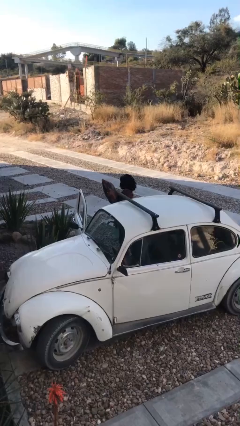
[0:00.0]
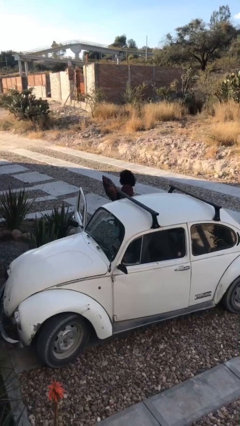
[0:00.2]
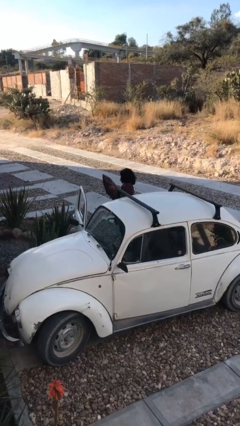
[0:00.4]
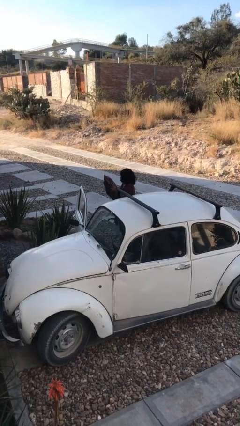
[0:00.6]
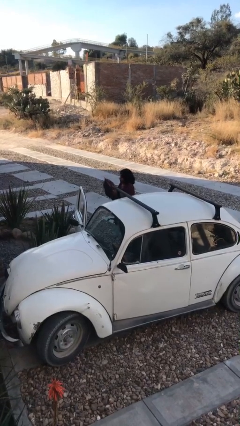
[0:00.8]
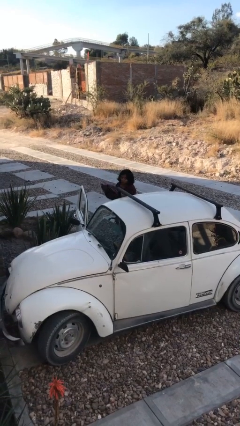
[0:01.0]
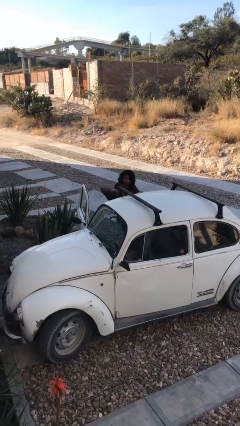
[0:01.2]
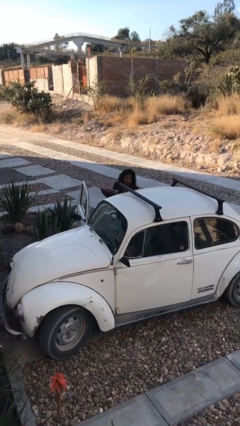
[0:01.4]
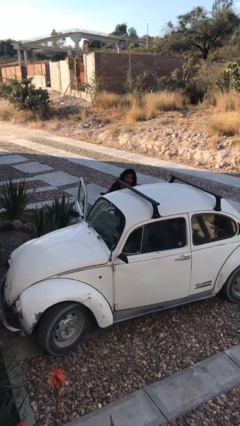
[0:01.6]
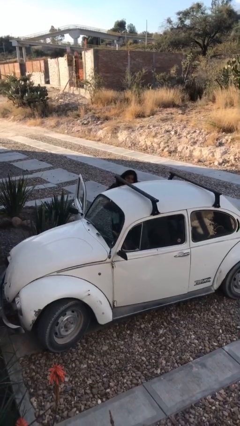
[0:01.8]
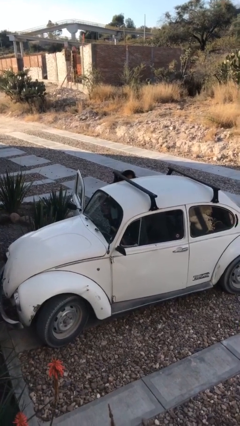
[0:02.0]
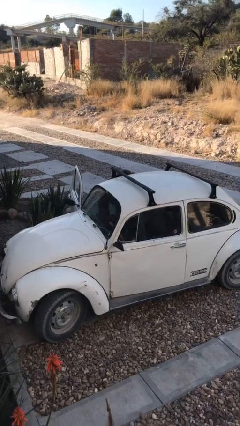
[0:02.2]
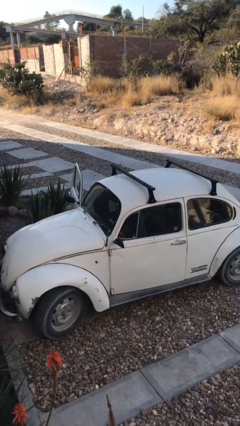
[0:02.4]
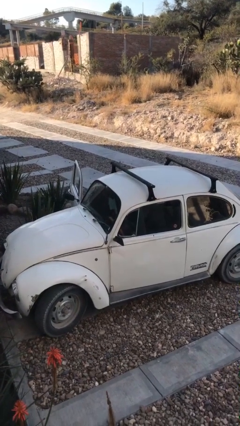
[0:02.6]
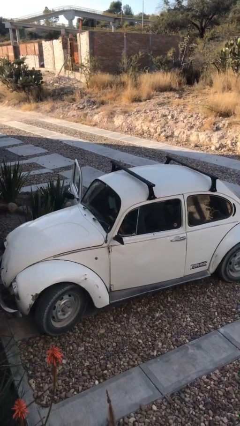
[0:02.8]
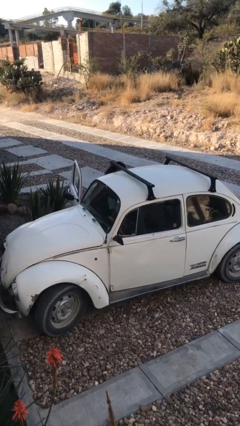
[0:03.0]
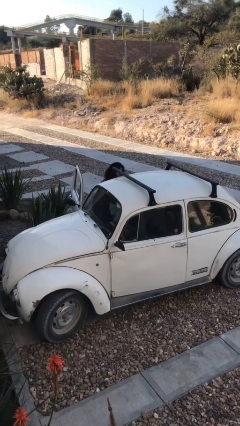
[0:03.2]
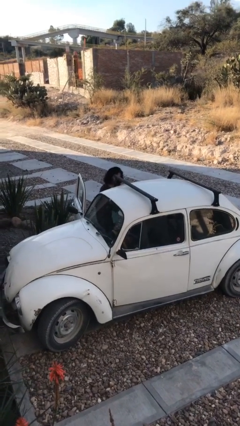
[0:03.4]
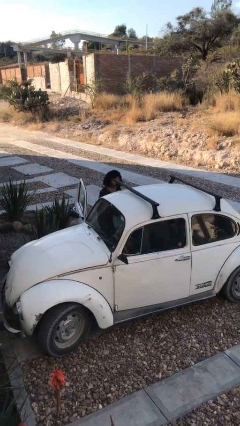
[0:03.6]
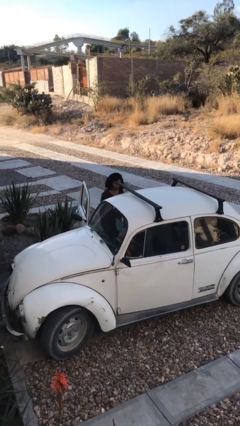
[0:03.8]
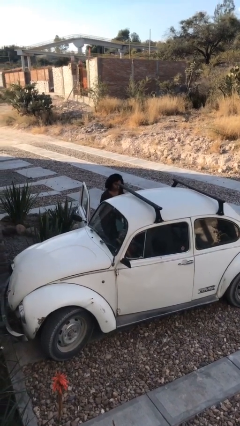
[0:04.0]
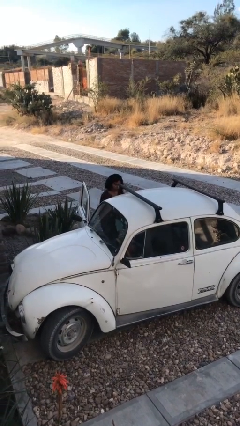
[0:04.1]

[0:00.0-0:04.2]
person loads car

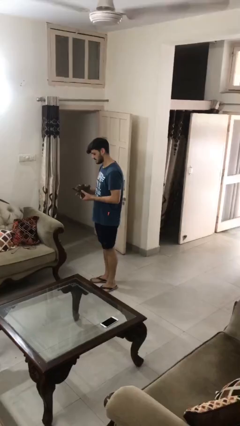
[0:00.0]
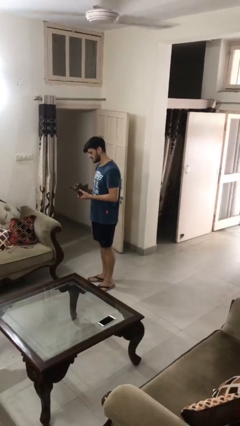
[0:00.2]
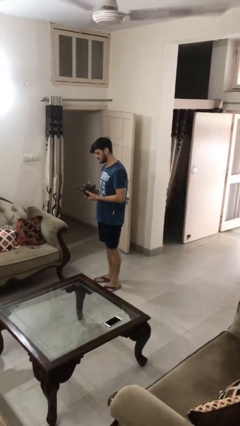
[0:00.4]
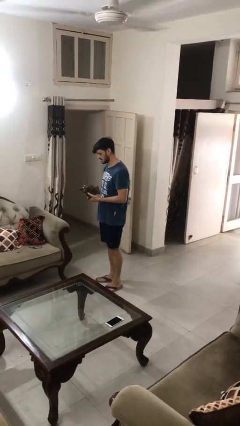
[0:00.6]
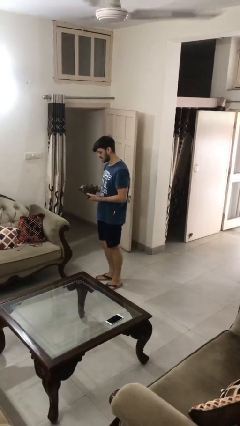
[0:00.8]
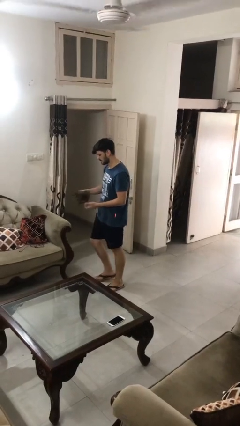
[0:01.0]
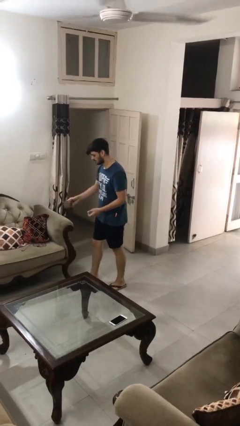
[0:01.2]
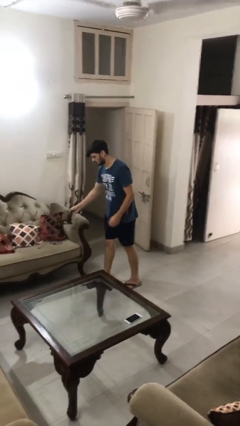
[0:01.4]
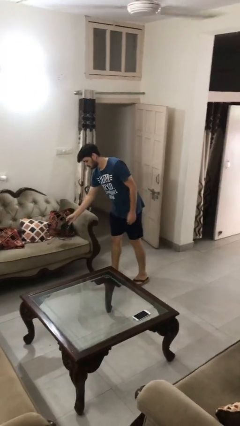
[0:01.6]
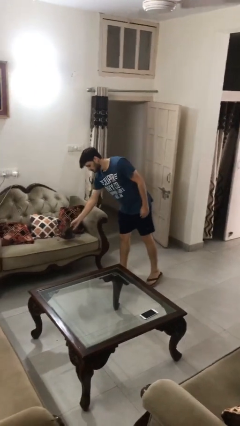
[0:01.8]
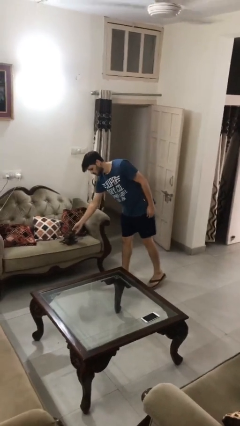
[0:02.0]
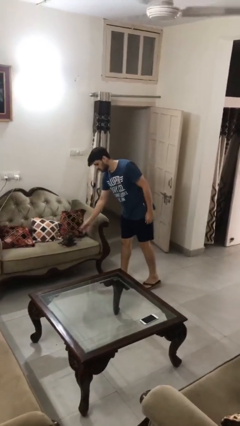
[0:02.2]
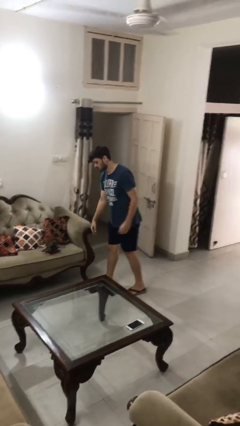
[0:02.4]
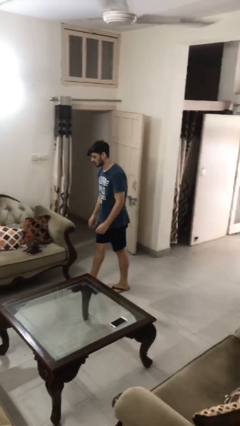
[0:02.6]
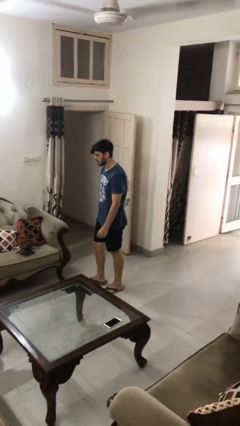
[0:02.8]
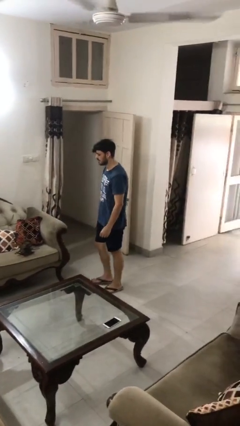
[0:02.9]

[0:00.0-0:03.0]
person puts down object on couch

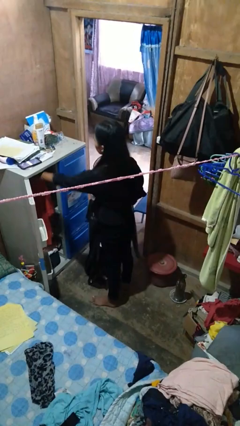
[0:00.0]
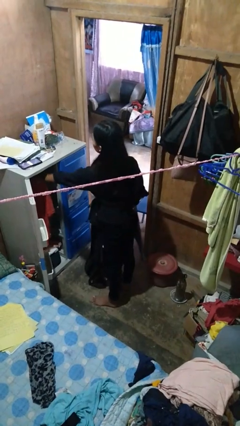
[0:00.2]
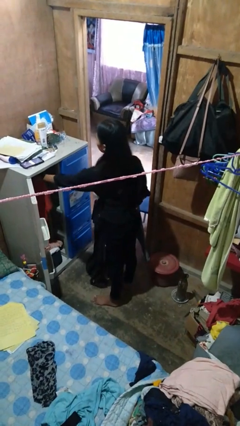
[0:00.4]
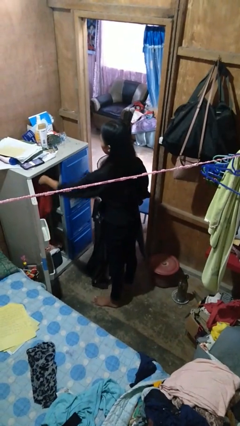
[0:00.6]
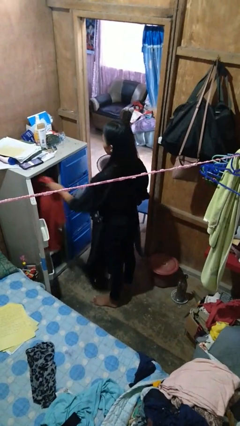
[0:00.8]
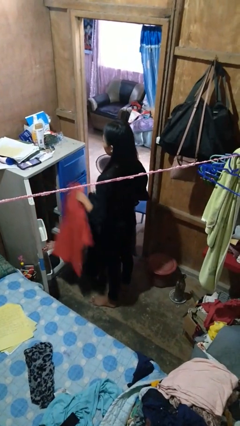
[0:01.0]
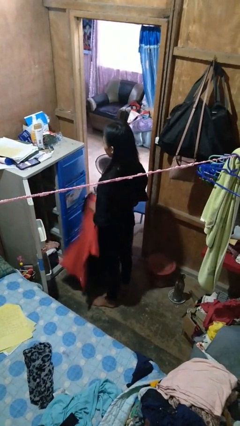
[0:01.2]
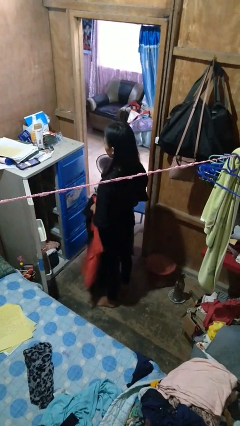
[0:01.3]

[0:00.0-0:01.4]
person takes clothes from closet

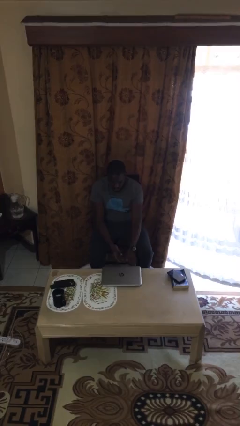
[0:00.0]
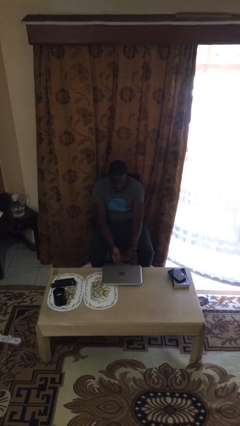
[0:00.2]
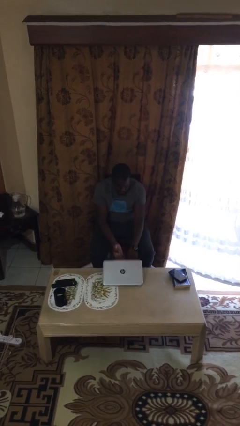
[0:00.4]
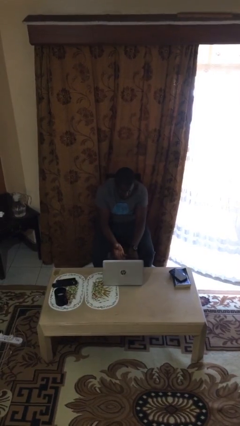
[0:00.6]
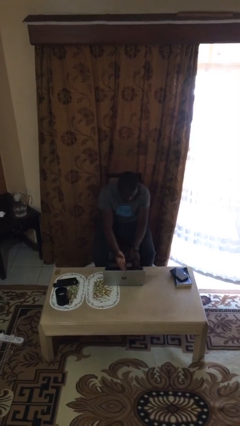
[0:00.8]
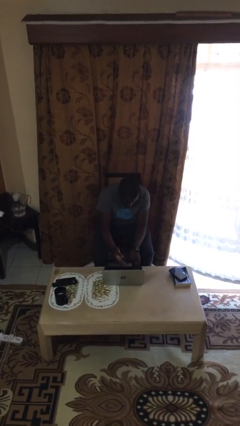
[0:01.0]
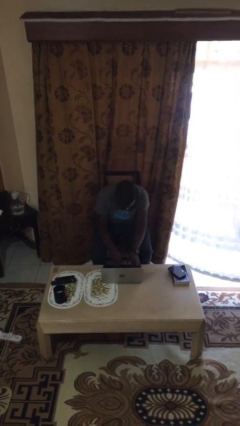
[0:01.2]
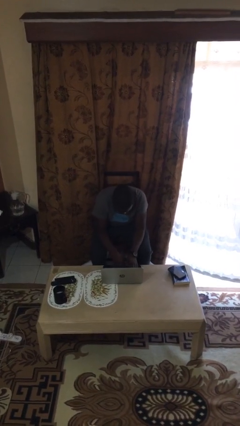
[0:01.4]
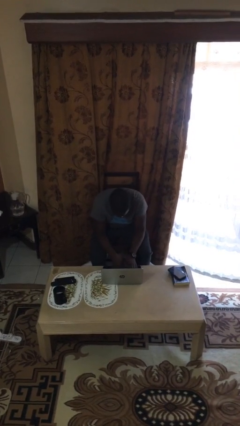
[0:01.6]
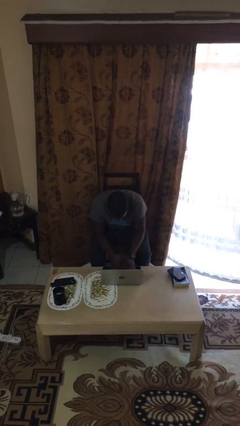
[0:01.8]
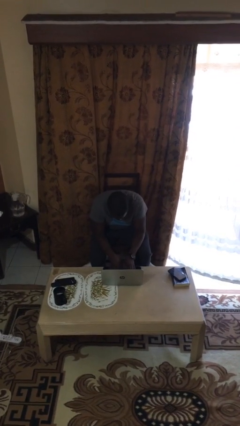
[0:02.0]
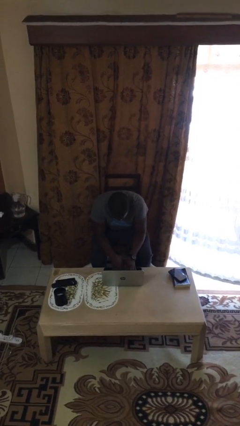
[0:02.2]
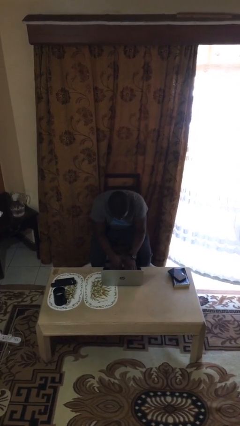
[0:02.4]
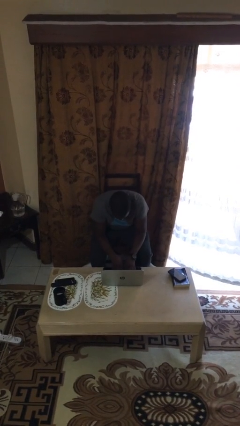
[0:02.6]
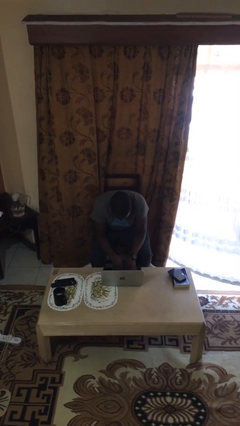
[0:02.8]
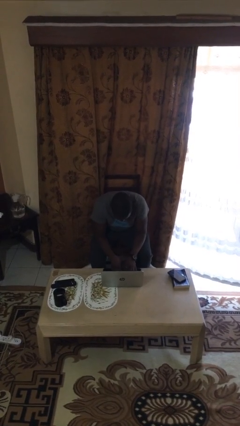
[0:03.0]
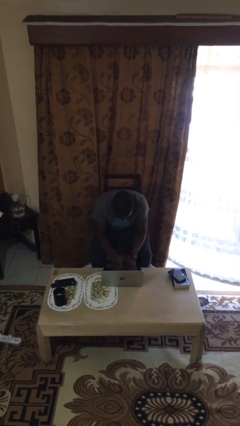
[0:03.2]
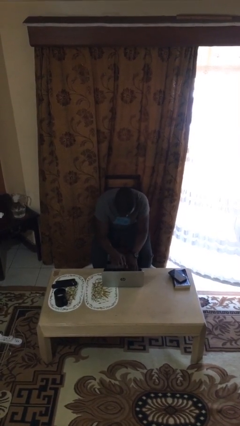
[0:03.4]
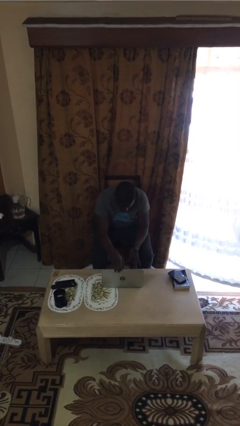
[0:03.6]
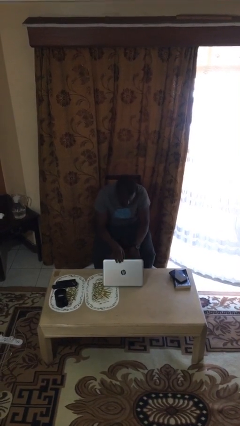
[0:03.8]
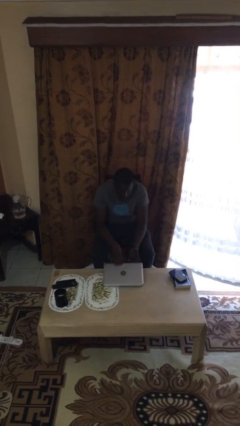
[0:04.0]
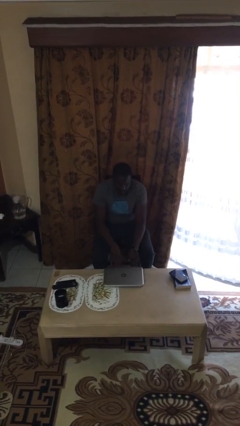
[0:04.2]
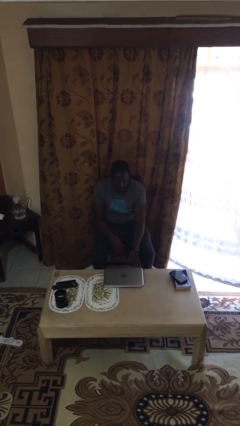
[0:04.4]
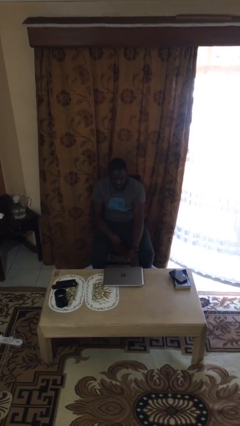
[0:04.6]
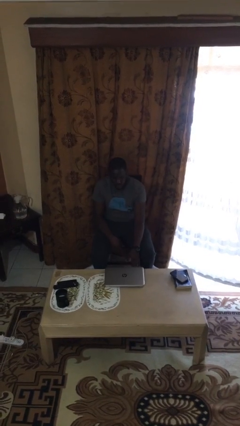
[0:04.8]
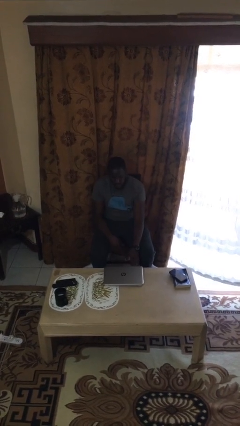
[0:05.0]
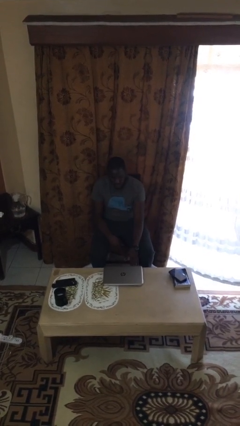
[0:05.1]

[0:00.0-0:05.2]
person interacts with laptop

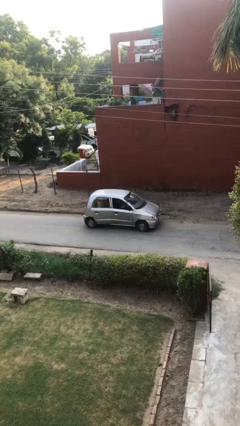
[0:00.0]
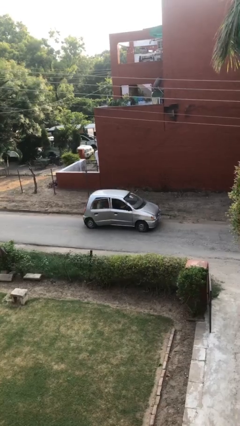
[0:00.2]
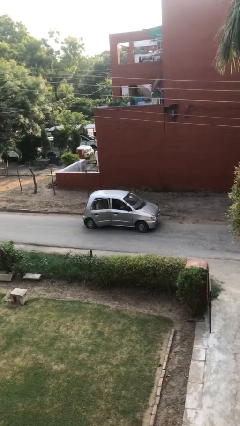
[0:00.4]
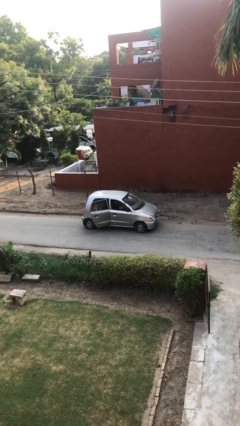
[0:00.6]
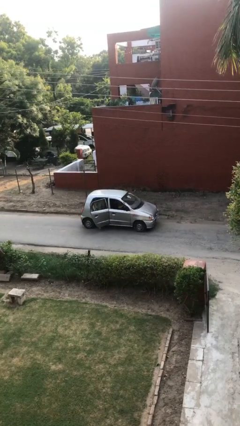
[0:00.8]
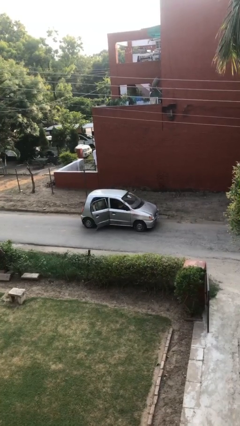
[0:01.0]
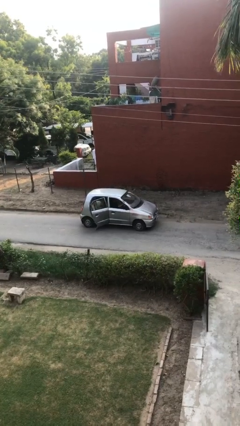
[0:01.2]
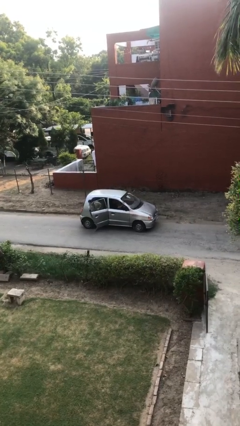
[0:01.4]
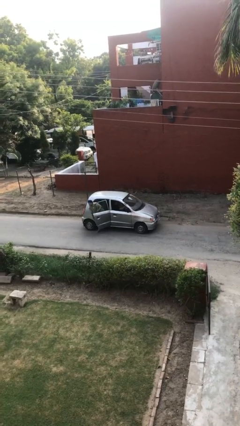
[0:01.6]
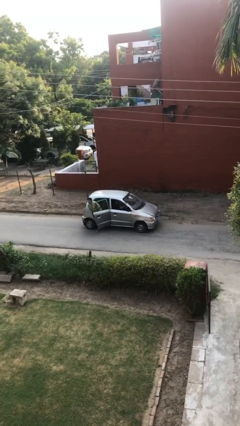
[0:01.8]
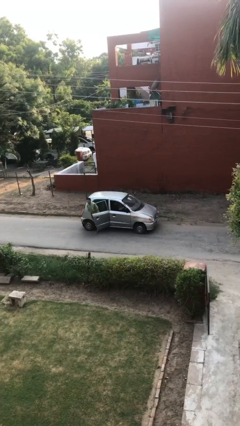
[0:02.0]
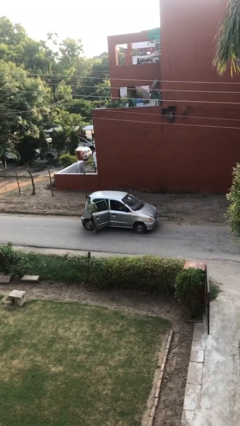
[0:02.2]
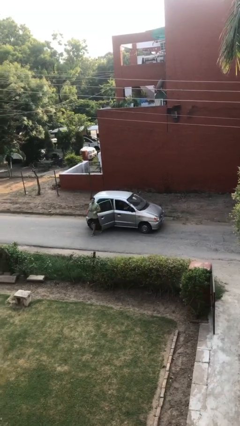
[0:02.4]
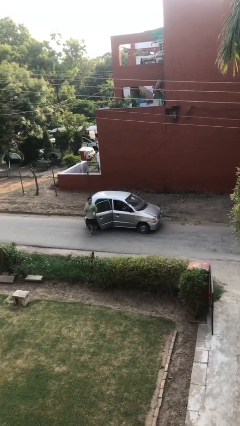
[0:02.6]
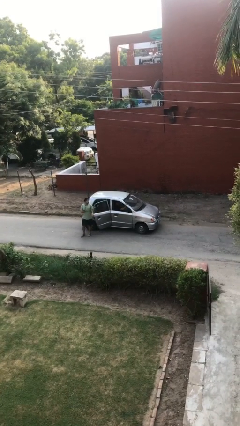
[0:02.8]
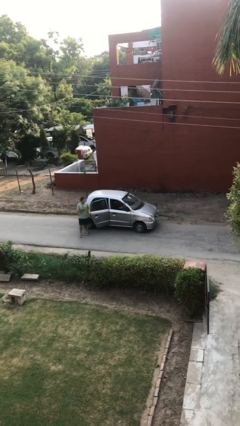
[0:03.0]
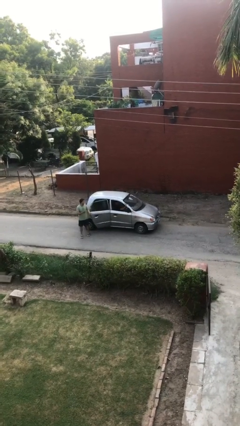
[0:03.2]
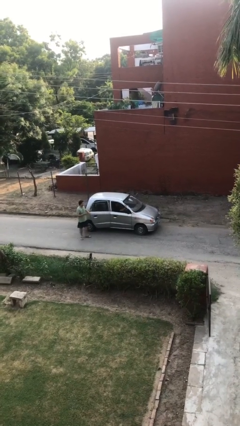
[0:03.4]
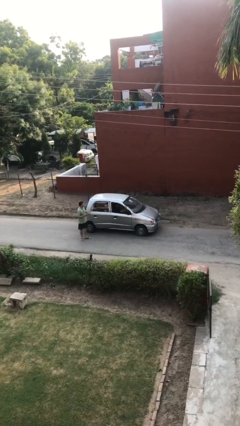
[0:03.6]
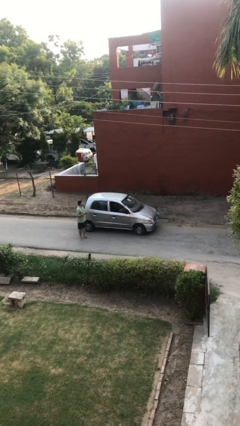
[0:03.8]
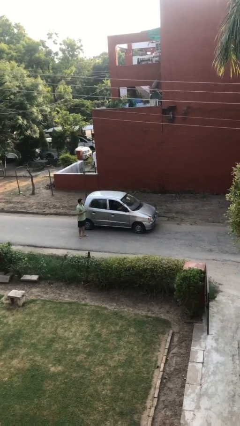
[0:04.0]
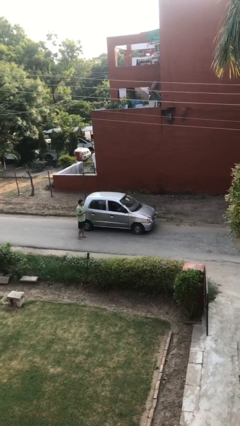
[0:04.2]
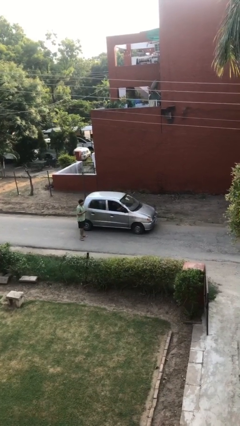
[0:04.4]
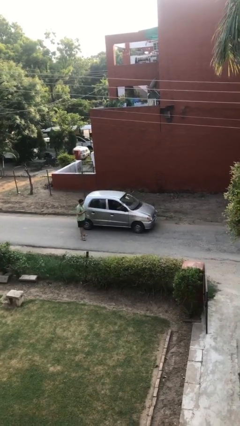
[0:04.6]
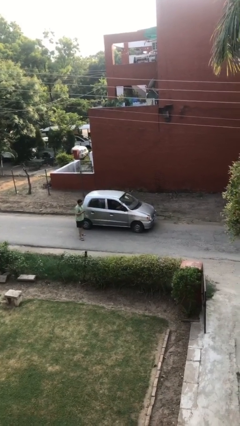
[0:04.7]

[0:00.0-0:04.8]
car drops off person
